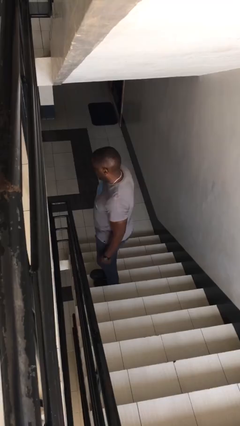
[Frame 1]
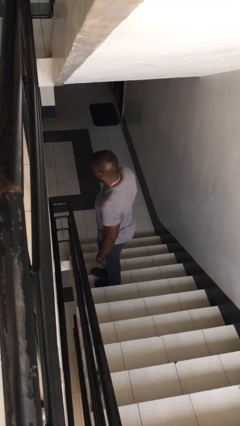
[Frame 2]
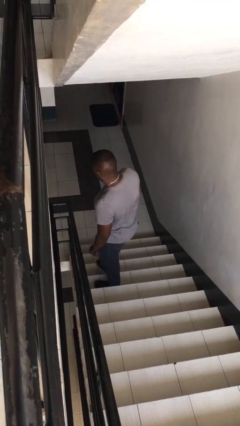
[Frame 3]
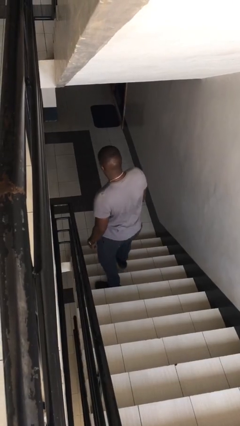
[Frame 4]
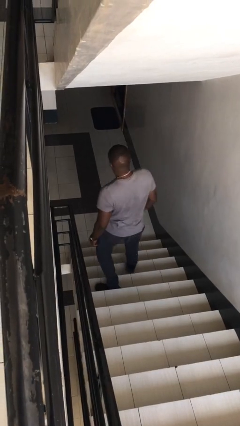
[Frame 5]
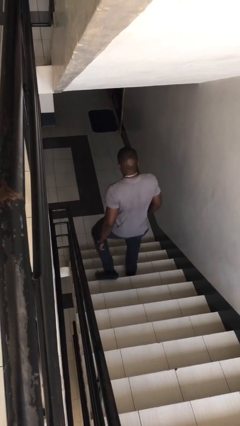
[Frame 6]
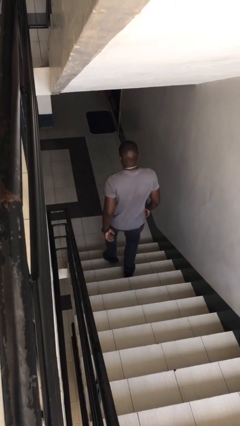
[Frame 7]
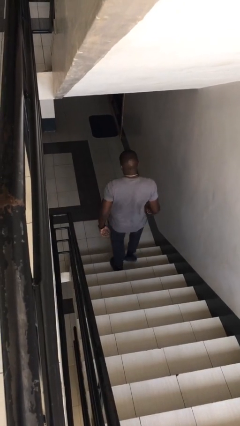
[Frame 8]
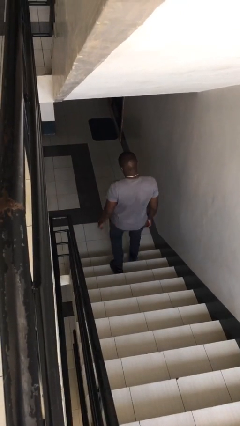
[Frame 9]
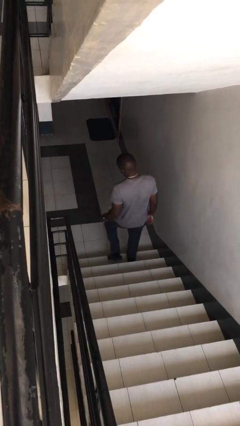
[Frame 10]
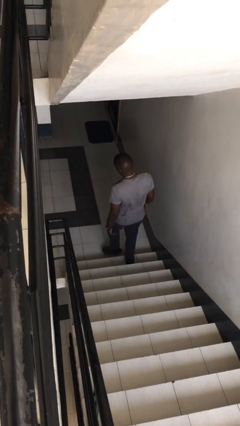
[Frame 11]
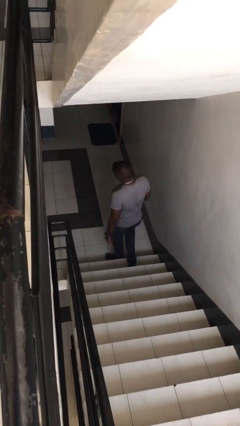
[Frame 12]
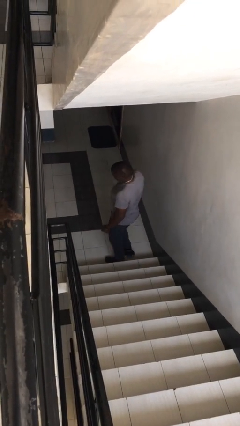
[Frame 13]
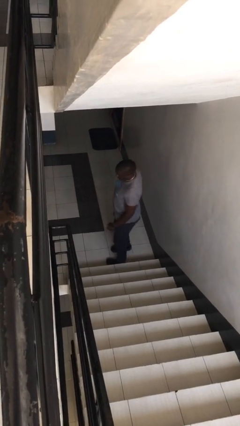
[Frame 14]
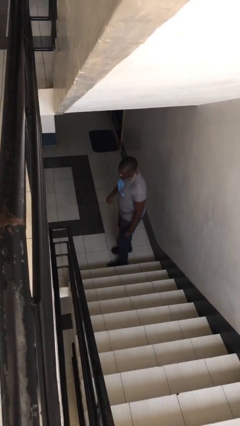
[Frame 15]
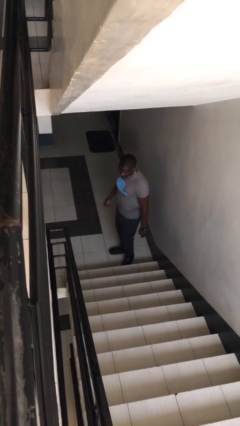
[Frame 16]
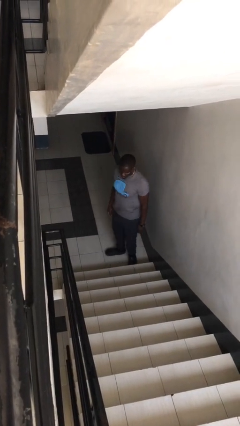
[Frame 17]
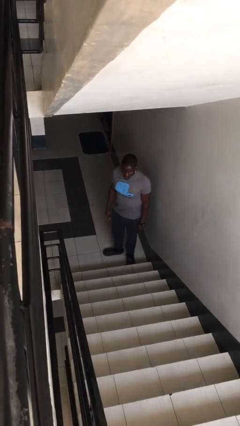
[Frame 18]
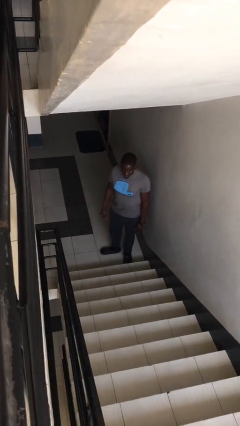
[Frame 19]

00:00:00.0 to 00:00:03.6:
person climbs down stairs

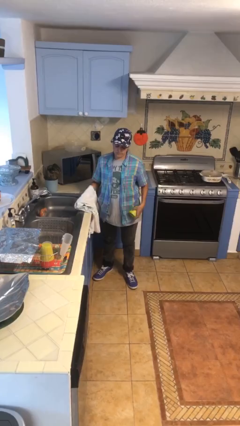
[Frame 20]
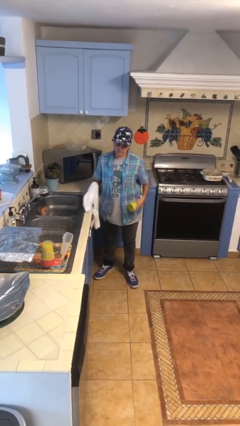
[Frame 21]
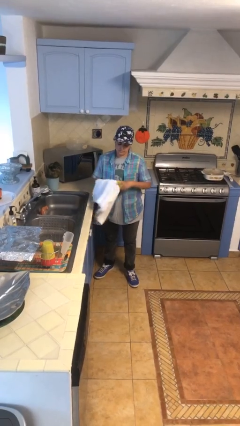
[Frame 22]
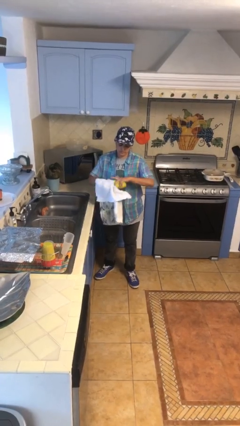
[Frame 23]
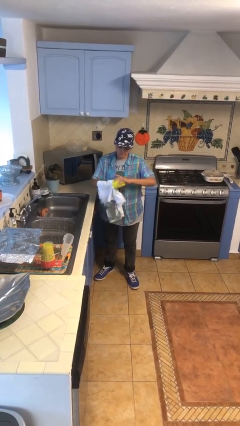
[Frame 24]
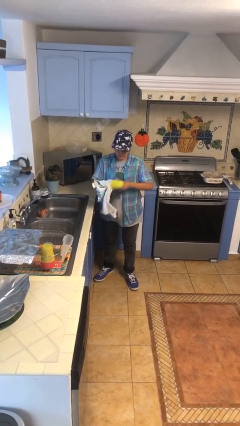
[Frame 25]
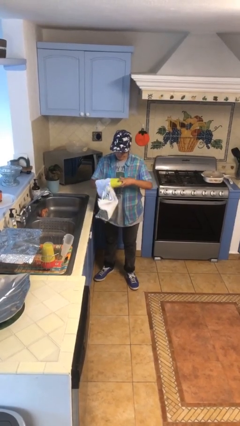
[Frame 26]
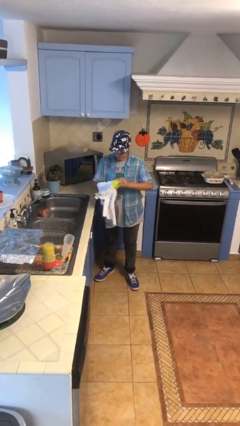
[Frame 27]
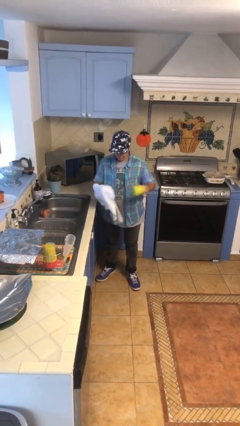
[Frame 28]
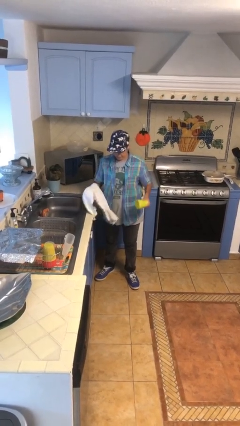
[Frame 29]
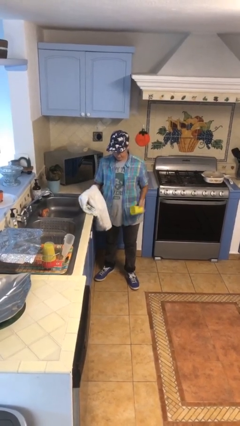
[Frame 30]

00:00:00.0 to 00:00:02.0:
person dries dish

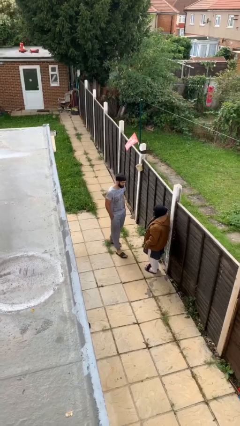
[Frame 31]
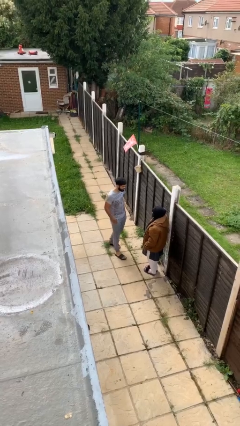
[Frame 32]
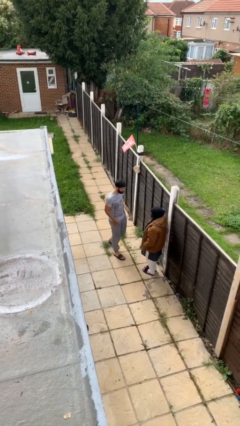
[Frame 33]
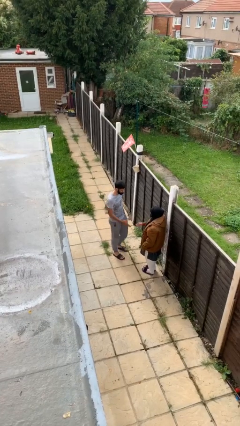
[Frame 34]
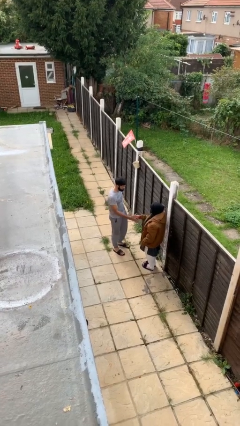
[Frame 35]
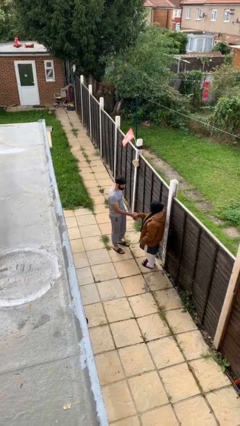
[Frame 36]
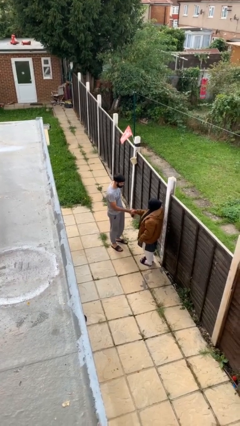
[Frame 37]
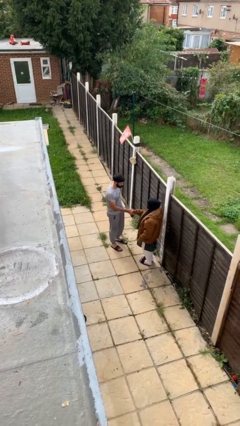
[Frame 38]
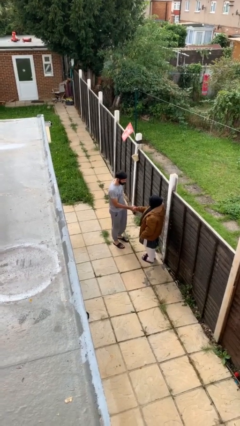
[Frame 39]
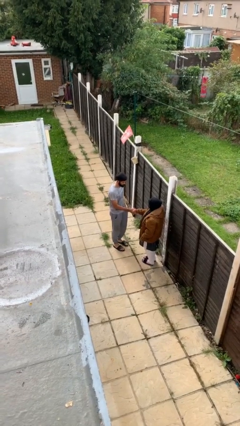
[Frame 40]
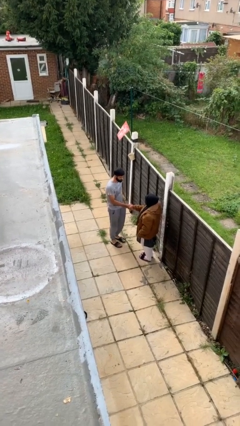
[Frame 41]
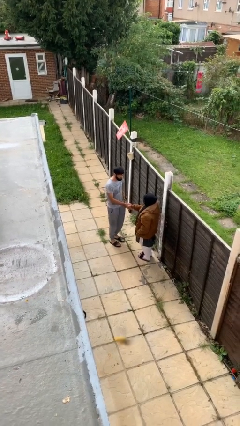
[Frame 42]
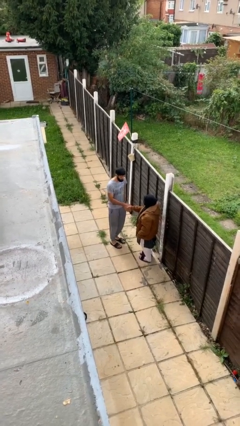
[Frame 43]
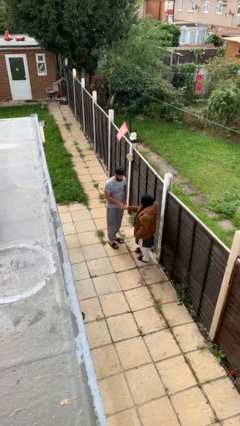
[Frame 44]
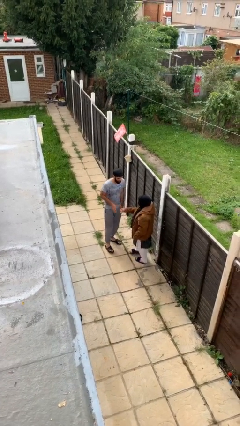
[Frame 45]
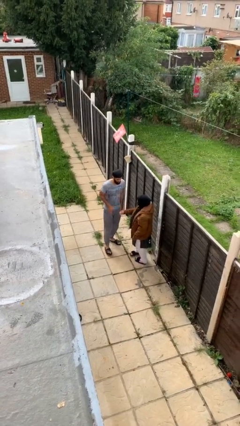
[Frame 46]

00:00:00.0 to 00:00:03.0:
person shakes hand

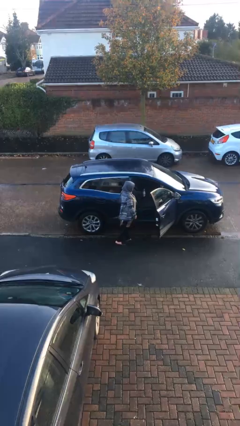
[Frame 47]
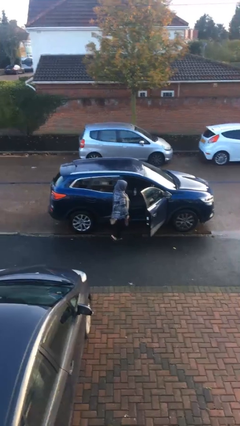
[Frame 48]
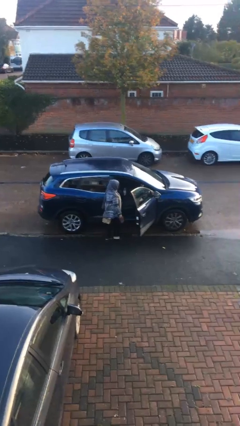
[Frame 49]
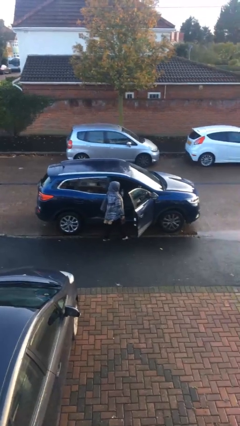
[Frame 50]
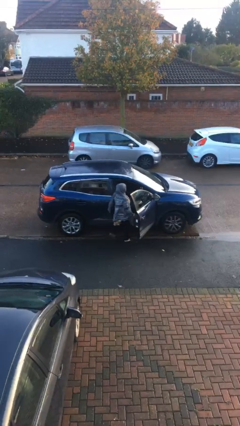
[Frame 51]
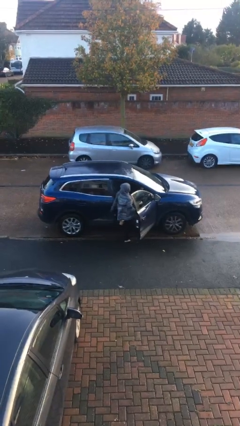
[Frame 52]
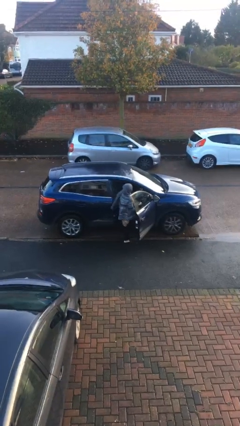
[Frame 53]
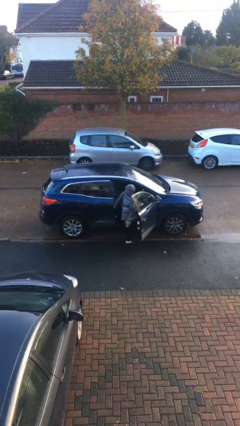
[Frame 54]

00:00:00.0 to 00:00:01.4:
person enters car

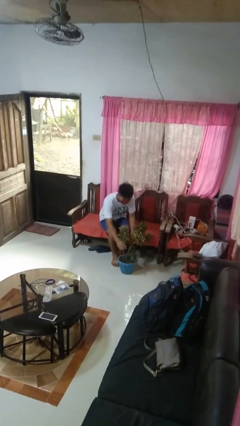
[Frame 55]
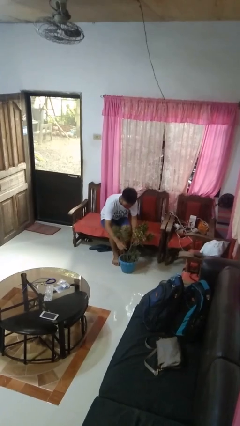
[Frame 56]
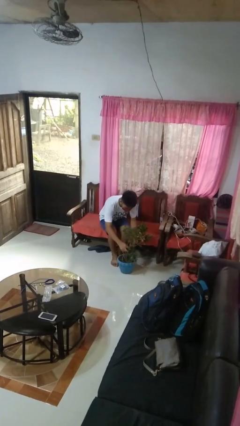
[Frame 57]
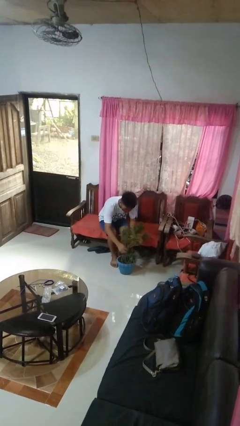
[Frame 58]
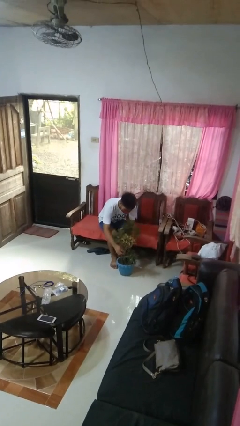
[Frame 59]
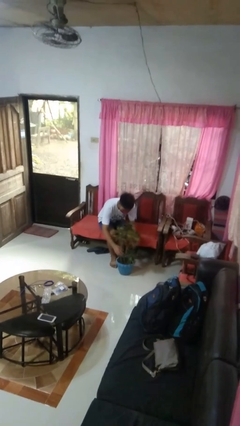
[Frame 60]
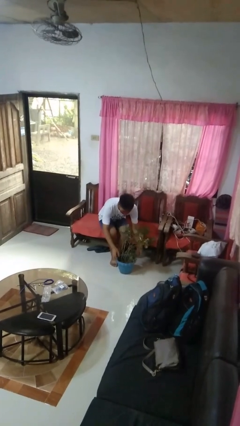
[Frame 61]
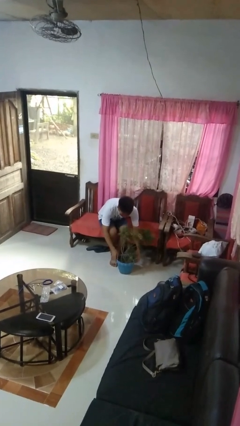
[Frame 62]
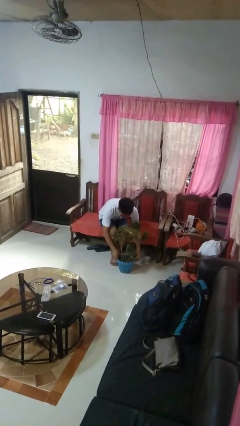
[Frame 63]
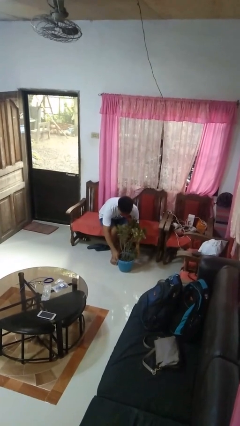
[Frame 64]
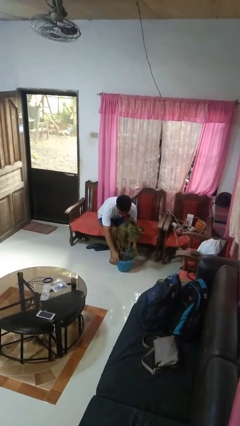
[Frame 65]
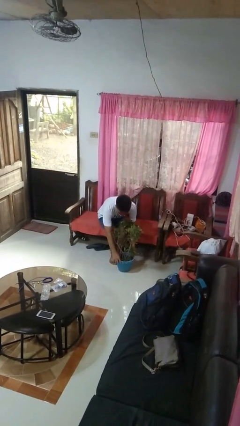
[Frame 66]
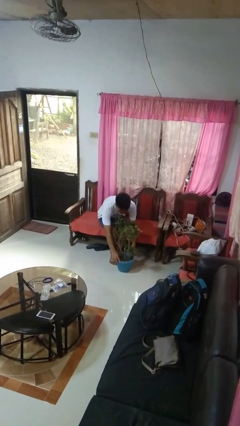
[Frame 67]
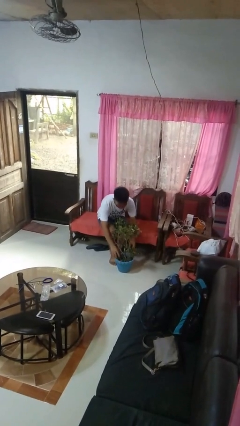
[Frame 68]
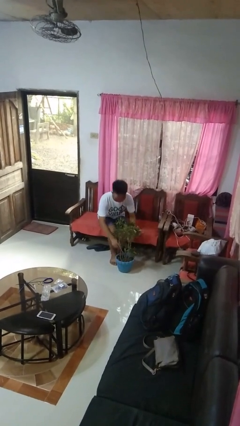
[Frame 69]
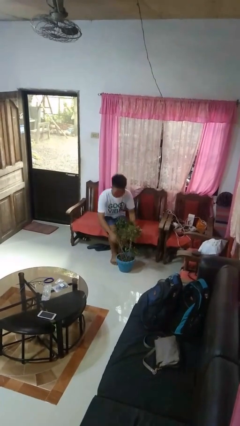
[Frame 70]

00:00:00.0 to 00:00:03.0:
person arranges flowers in vase

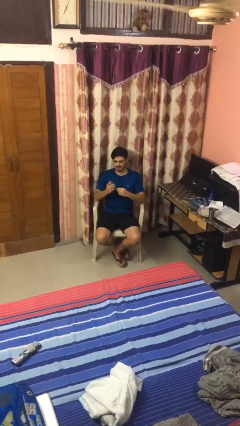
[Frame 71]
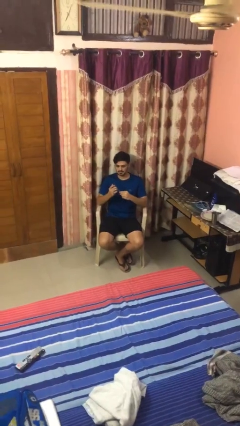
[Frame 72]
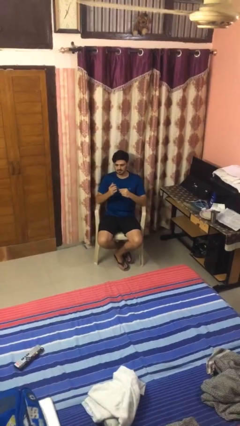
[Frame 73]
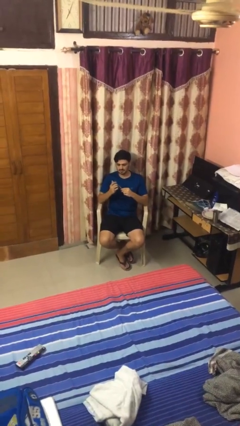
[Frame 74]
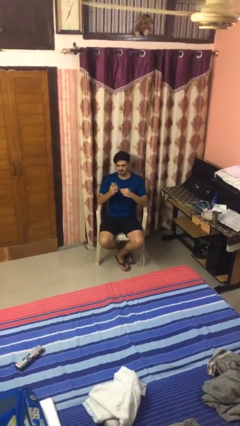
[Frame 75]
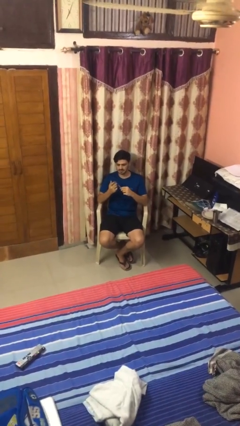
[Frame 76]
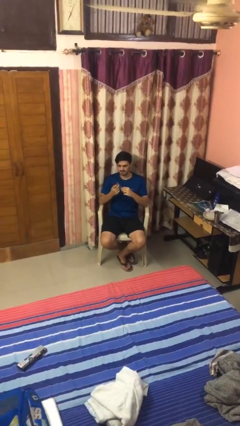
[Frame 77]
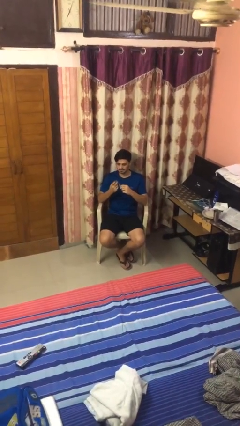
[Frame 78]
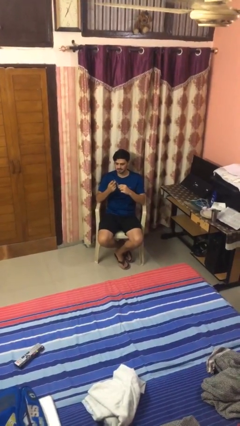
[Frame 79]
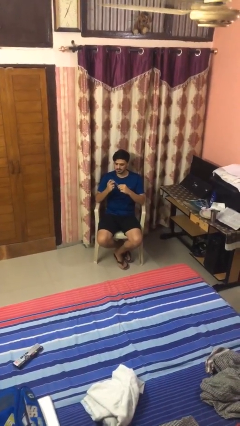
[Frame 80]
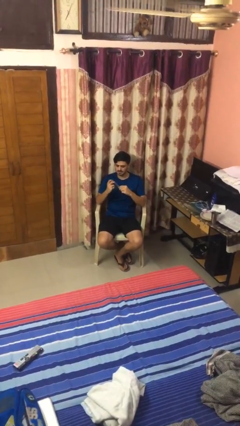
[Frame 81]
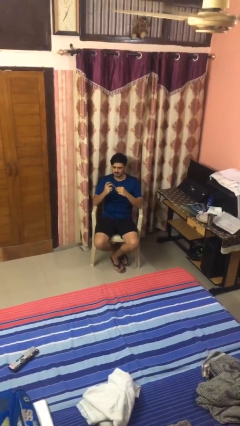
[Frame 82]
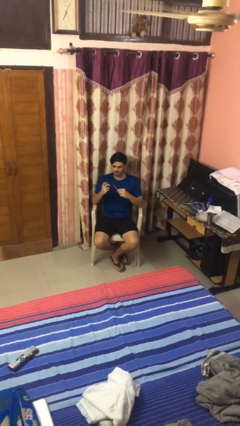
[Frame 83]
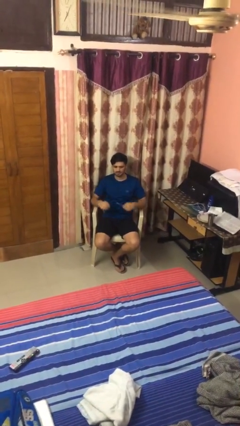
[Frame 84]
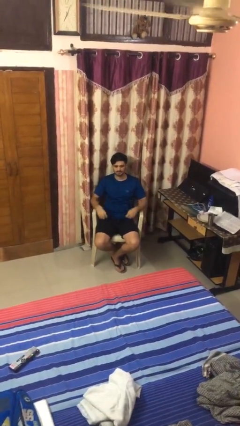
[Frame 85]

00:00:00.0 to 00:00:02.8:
person files fingernails

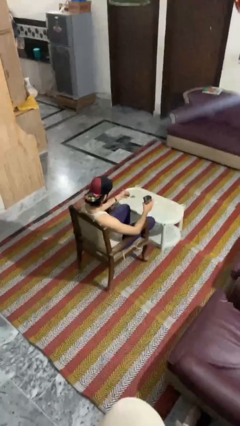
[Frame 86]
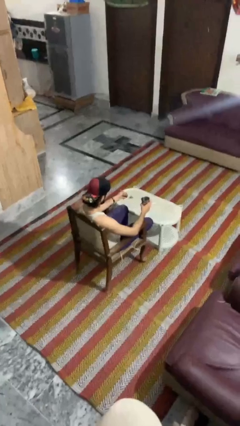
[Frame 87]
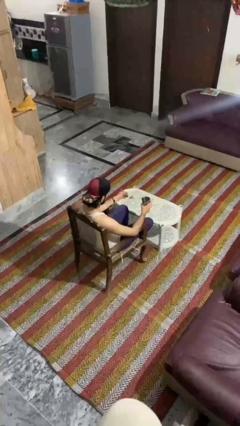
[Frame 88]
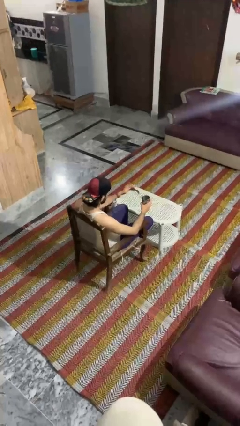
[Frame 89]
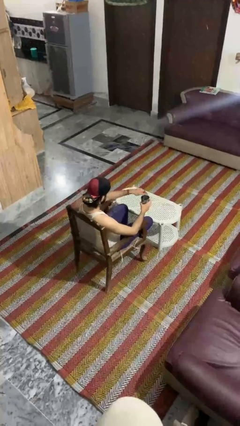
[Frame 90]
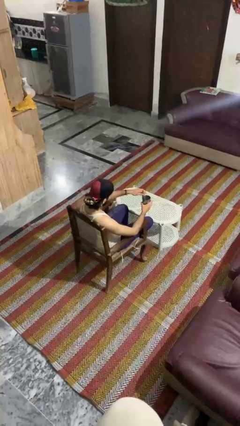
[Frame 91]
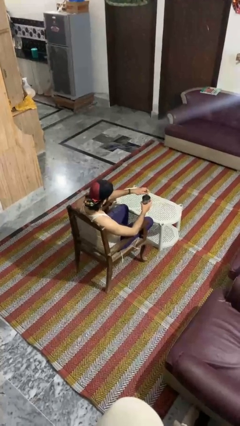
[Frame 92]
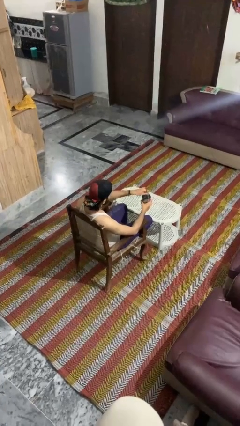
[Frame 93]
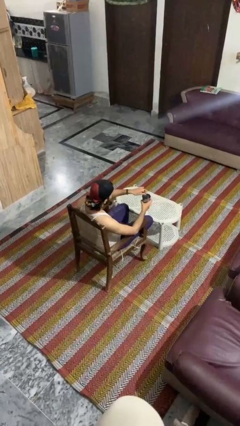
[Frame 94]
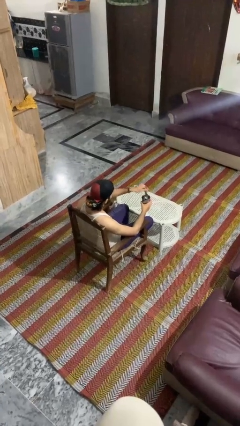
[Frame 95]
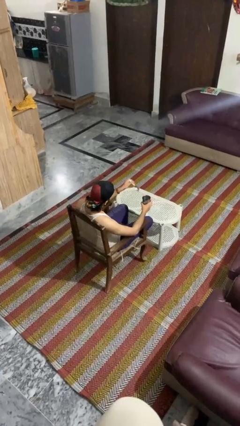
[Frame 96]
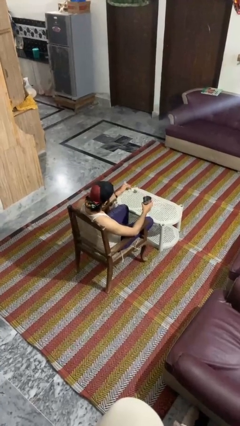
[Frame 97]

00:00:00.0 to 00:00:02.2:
person stirs mug
